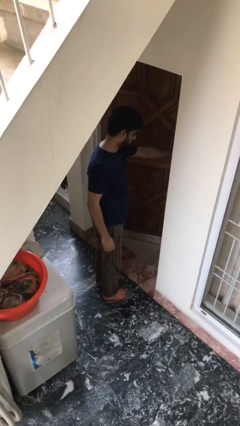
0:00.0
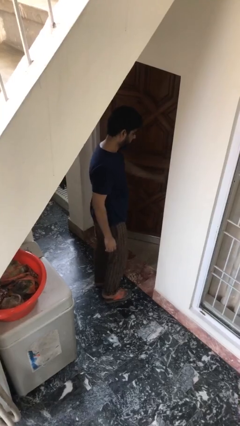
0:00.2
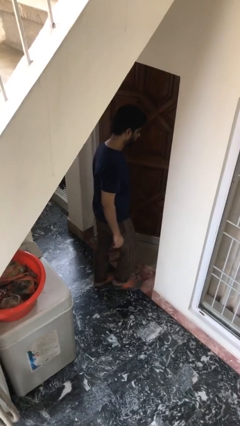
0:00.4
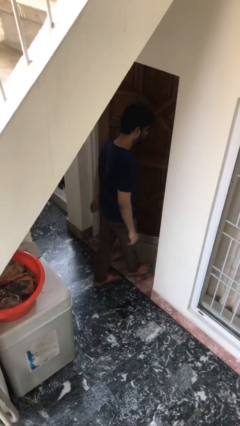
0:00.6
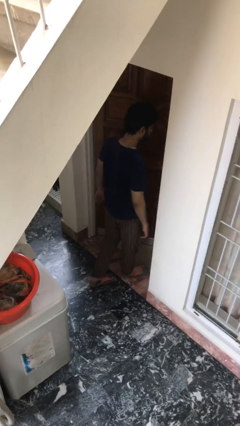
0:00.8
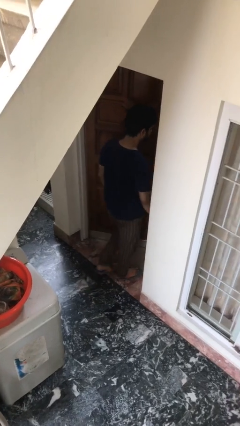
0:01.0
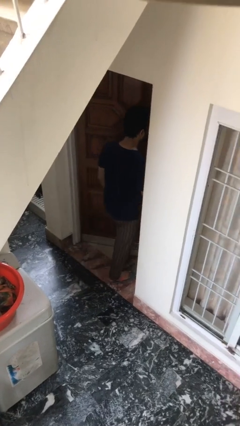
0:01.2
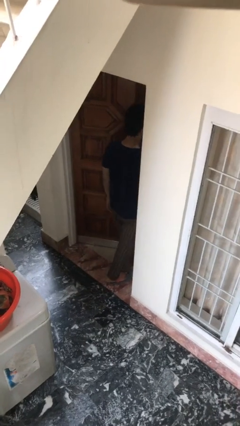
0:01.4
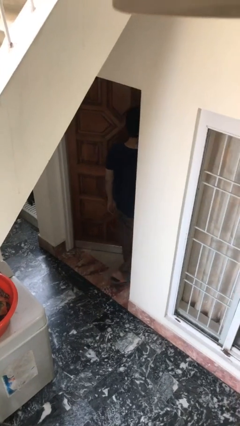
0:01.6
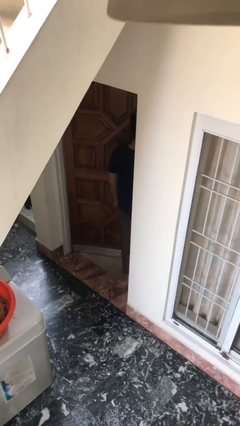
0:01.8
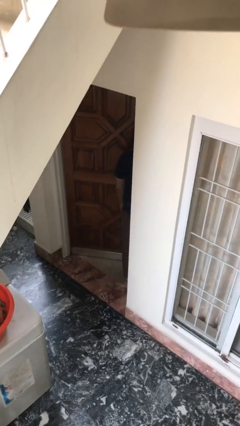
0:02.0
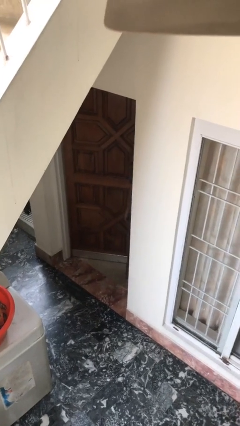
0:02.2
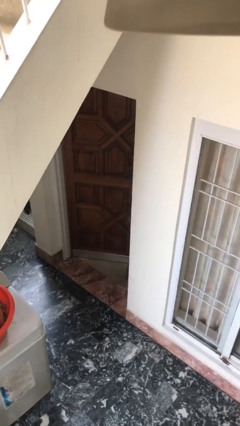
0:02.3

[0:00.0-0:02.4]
person exits scene through structure

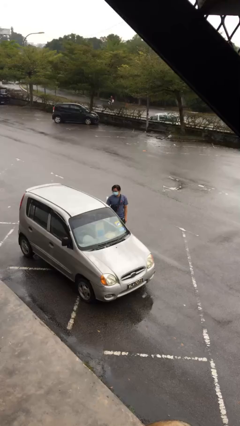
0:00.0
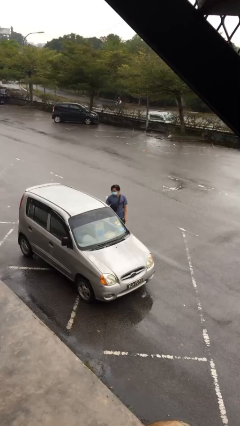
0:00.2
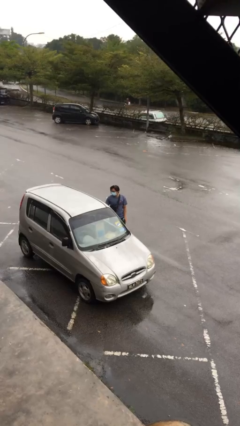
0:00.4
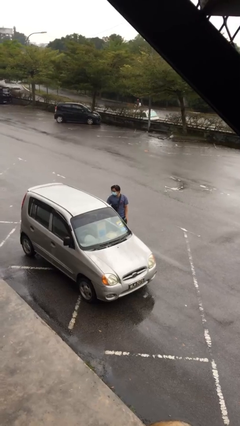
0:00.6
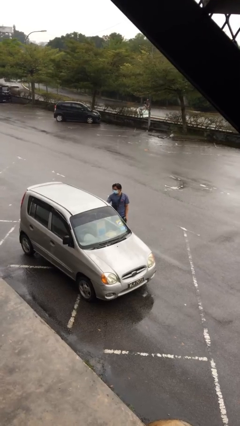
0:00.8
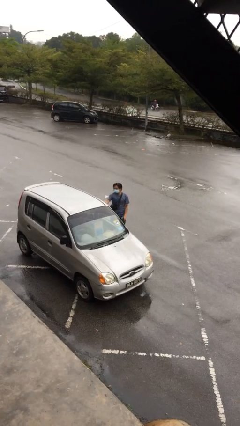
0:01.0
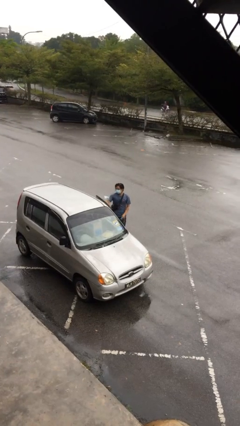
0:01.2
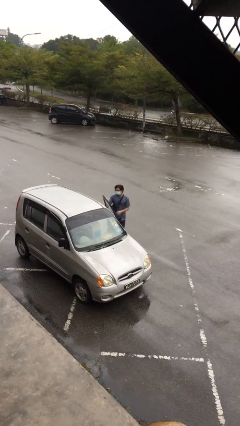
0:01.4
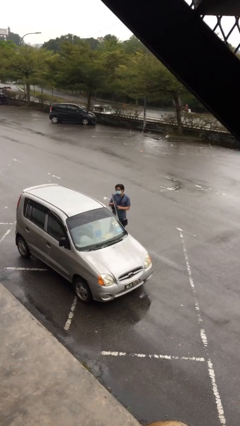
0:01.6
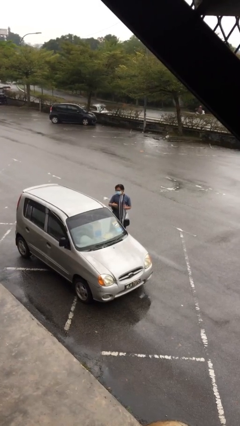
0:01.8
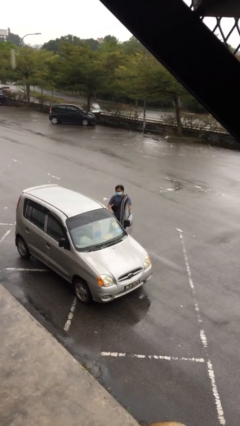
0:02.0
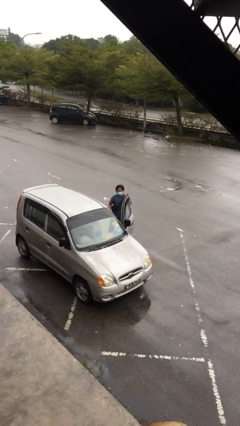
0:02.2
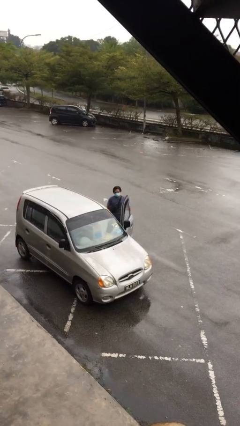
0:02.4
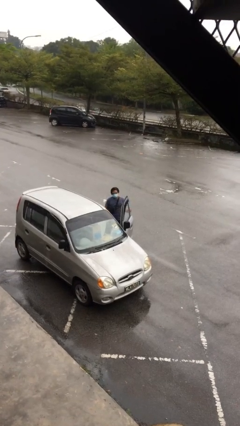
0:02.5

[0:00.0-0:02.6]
person opens car door

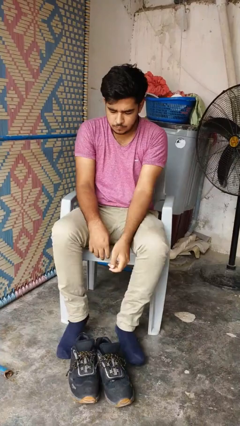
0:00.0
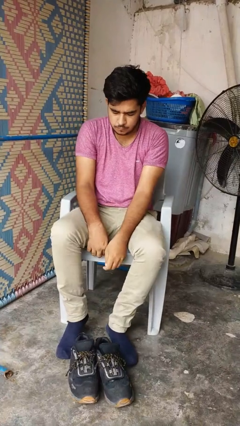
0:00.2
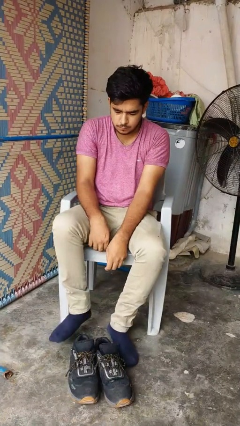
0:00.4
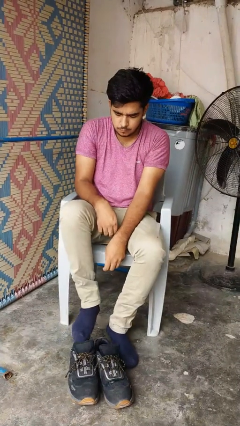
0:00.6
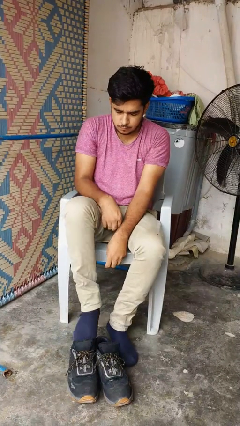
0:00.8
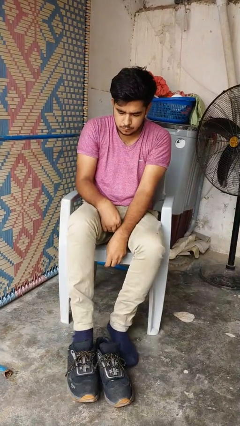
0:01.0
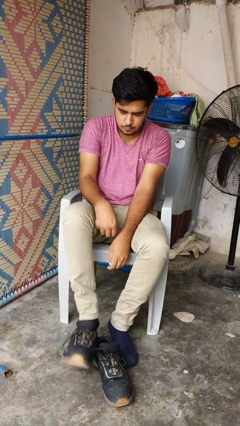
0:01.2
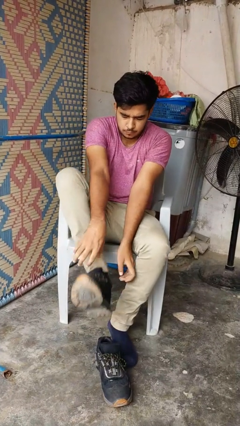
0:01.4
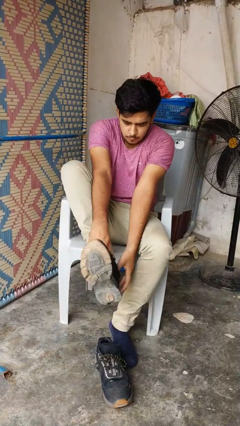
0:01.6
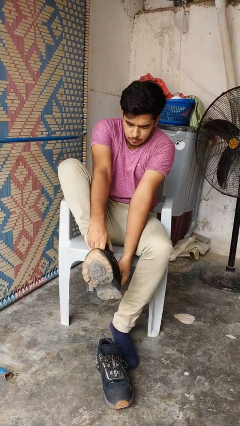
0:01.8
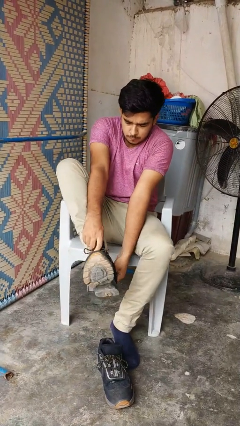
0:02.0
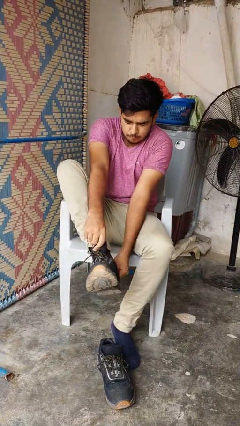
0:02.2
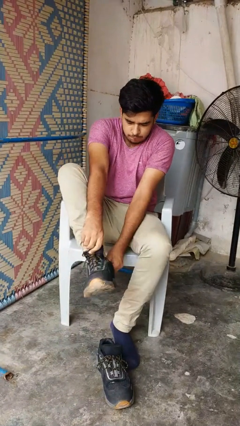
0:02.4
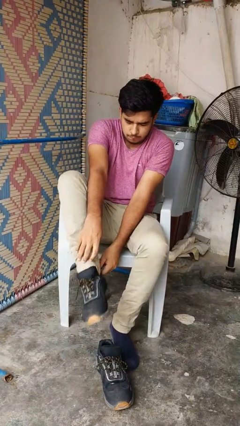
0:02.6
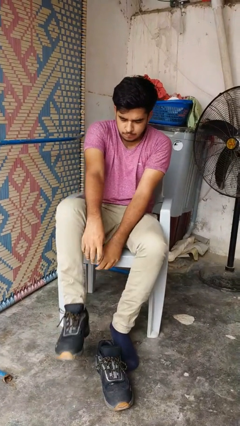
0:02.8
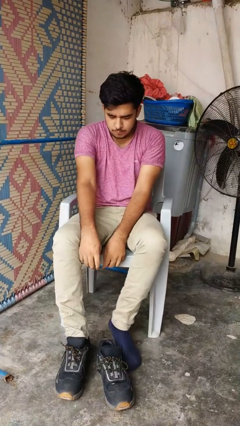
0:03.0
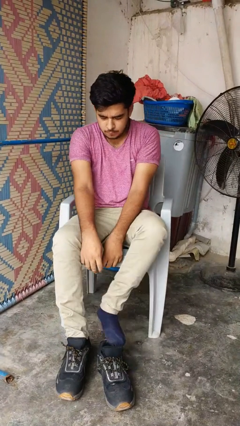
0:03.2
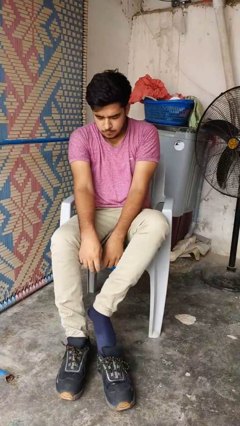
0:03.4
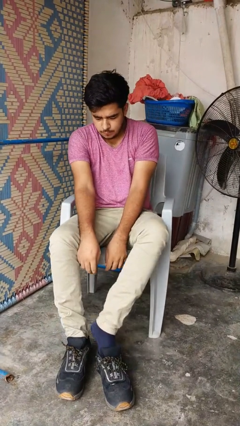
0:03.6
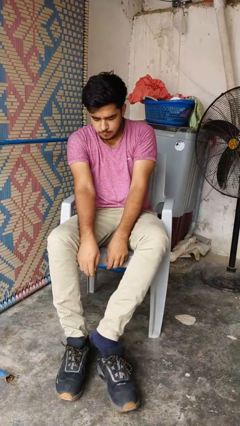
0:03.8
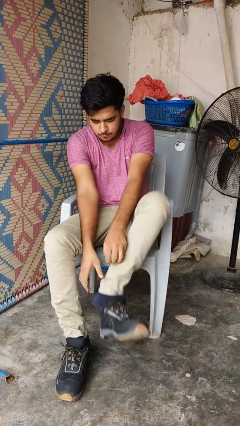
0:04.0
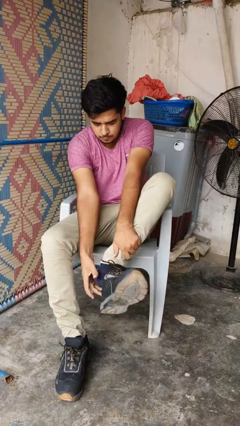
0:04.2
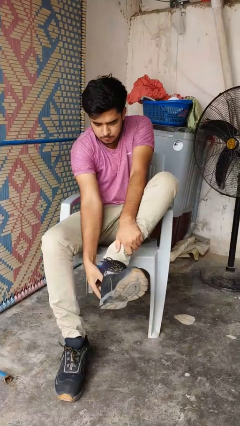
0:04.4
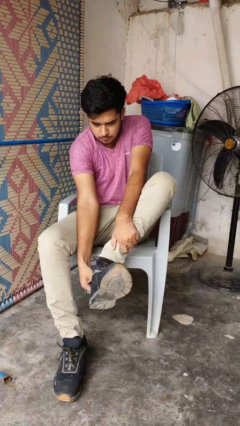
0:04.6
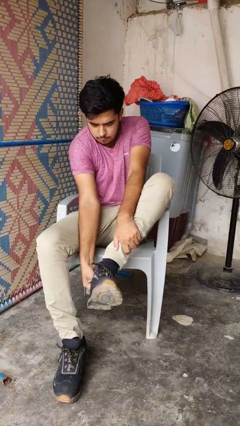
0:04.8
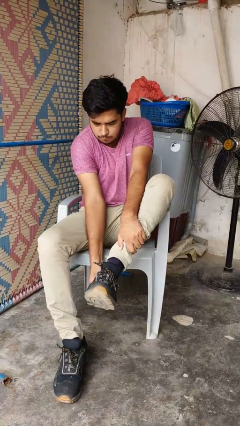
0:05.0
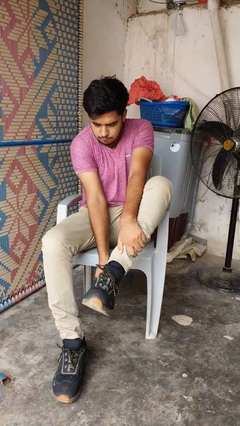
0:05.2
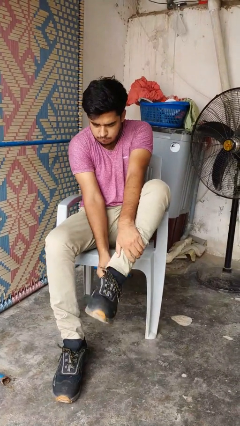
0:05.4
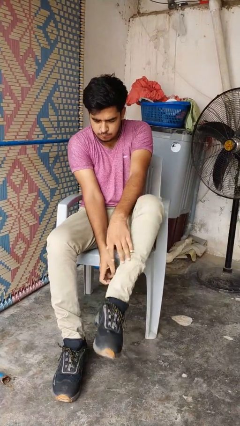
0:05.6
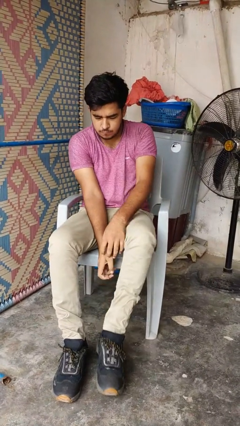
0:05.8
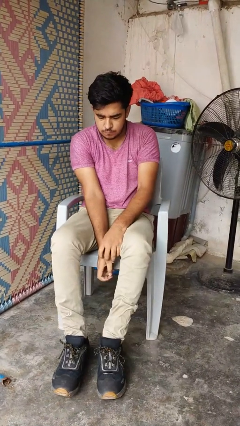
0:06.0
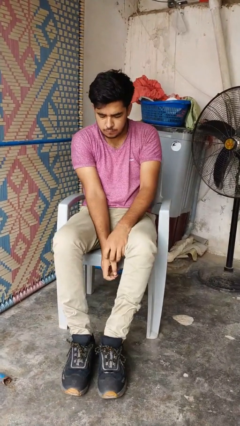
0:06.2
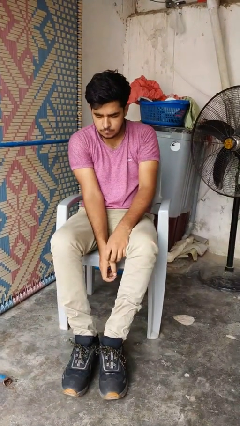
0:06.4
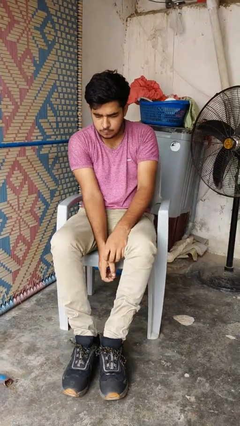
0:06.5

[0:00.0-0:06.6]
person puts on boots

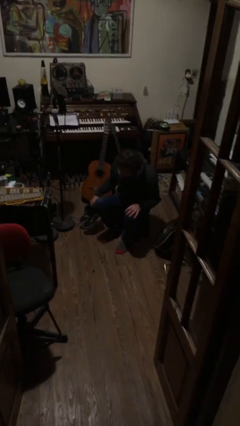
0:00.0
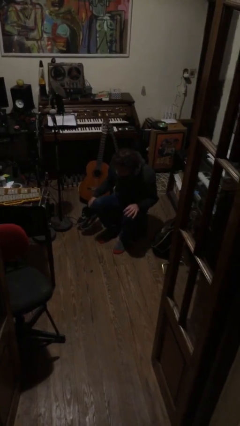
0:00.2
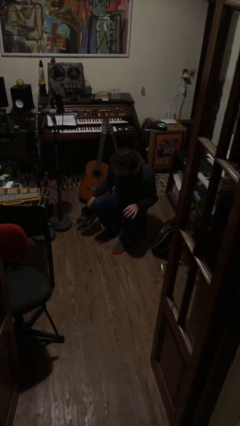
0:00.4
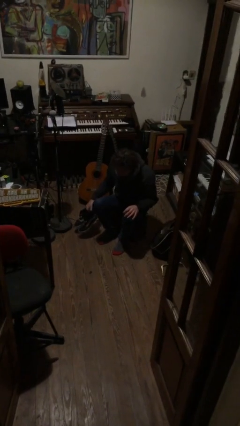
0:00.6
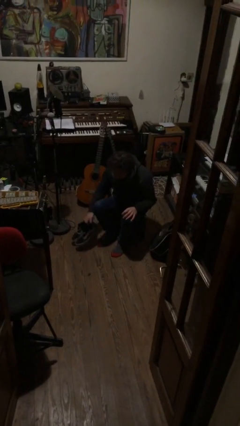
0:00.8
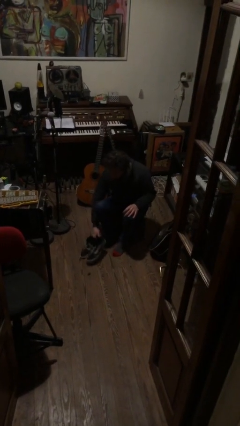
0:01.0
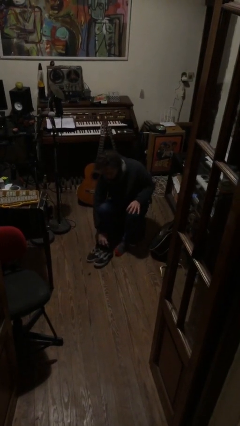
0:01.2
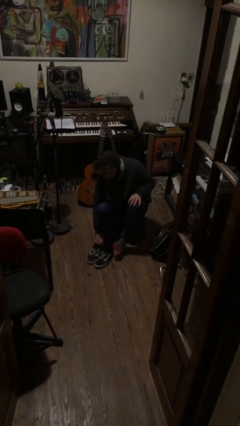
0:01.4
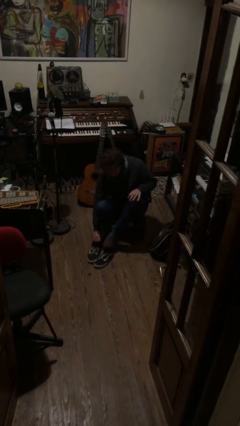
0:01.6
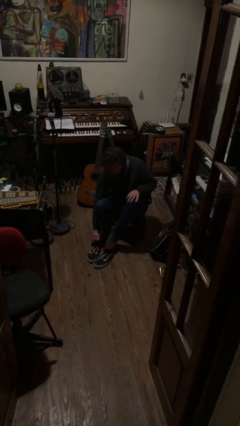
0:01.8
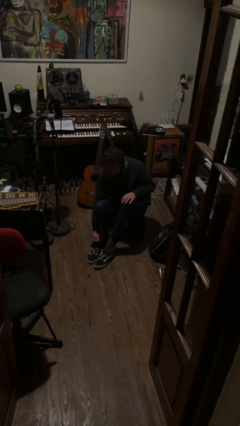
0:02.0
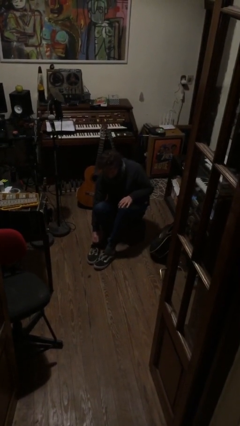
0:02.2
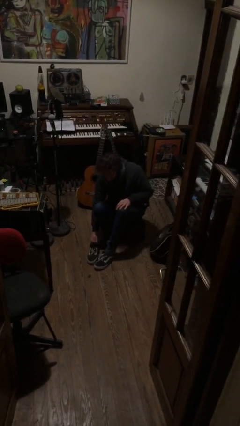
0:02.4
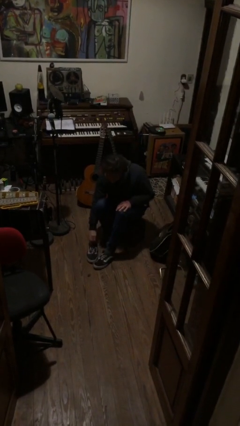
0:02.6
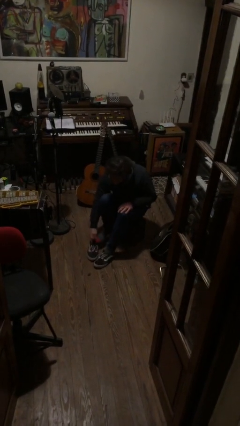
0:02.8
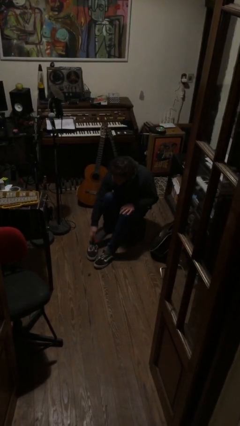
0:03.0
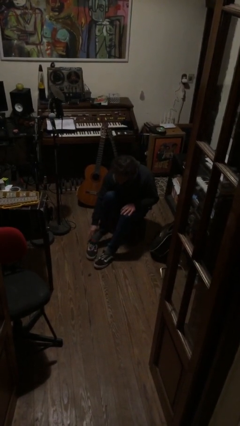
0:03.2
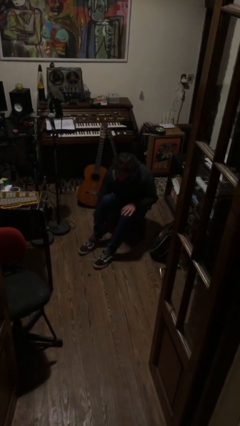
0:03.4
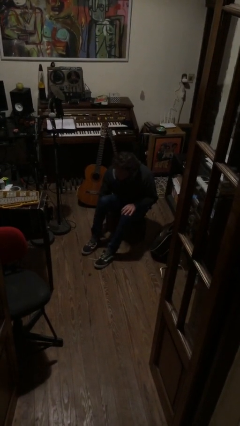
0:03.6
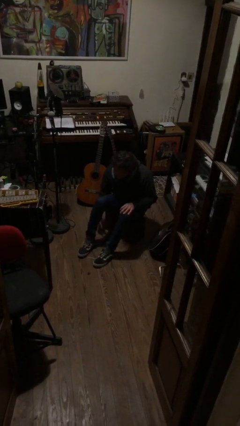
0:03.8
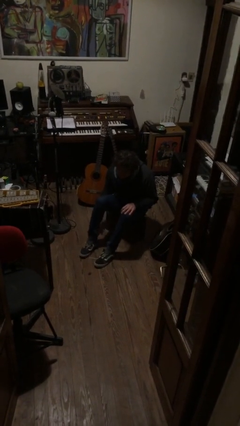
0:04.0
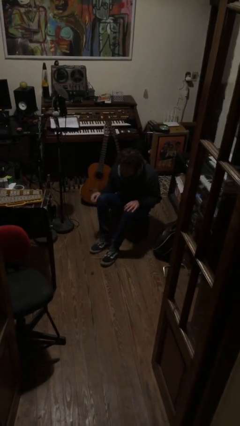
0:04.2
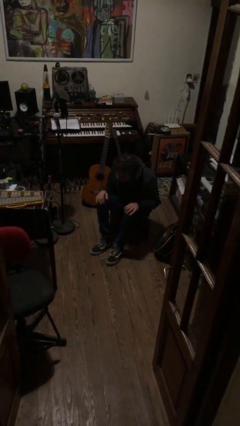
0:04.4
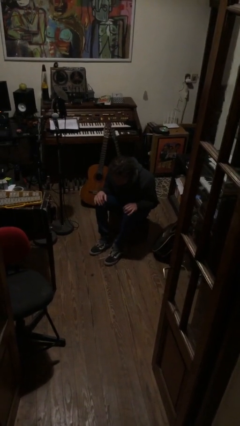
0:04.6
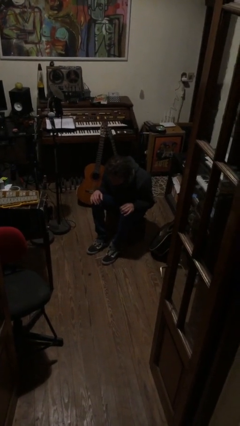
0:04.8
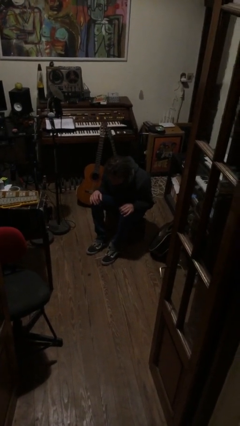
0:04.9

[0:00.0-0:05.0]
person puts on shoes

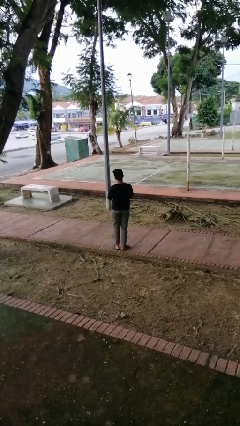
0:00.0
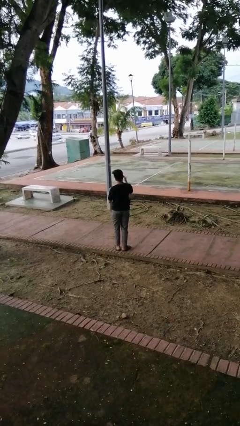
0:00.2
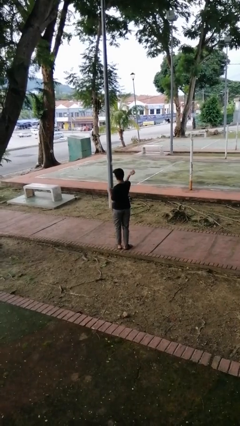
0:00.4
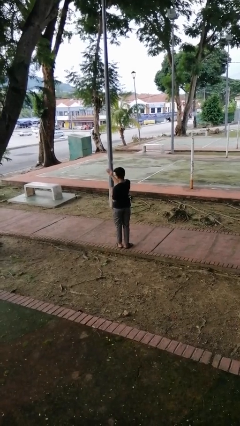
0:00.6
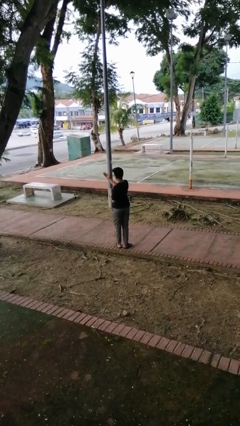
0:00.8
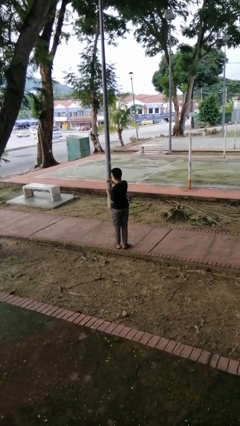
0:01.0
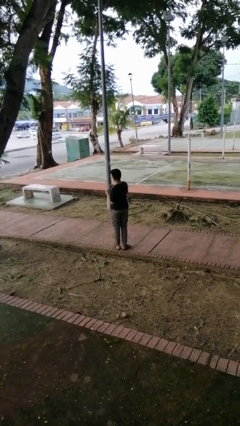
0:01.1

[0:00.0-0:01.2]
person karate chop
